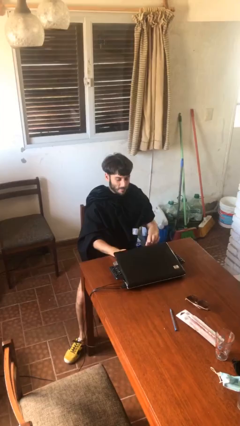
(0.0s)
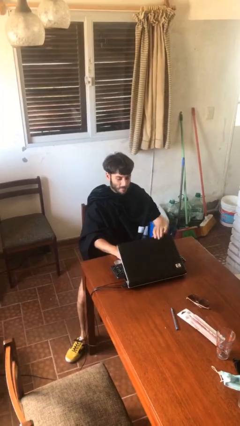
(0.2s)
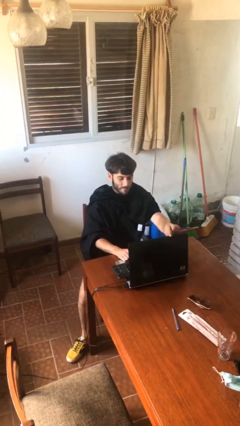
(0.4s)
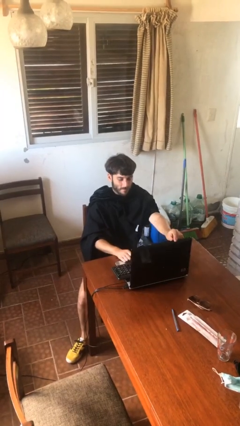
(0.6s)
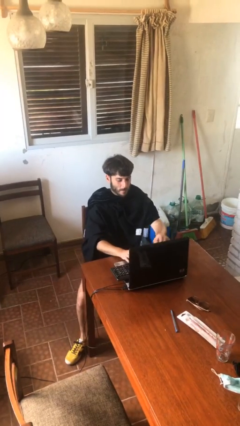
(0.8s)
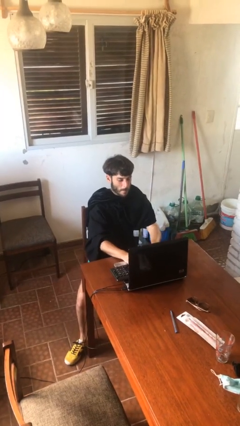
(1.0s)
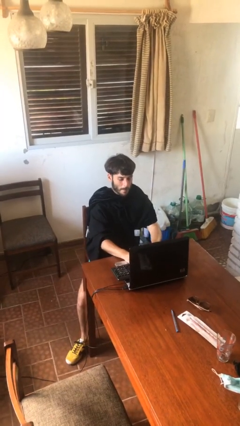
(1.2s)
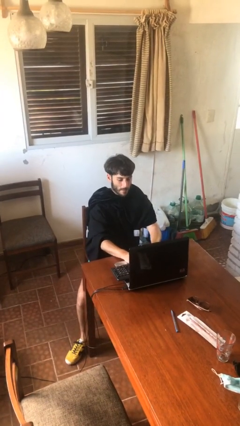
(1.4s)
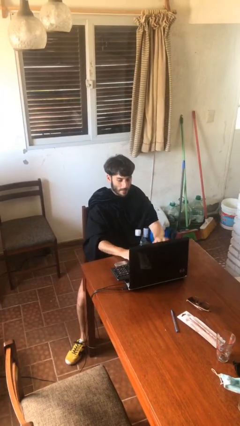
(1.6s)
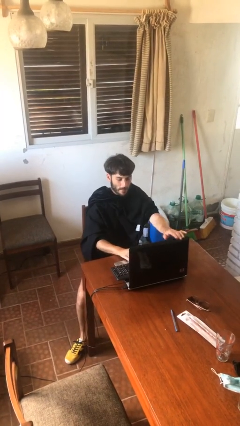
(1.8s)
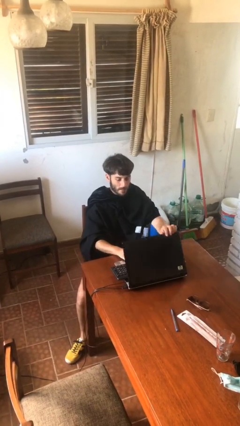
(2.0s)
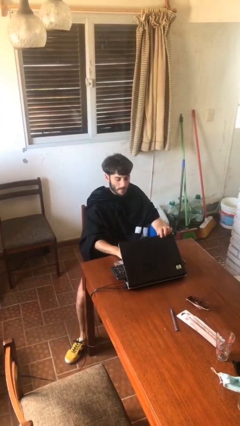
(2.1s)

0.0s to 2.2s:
person interacts with laptop

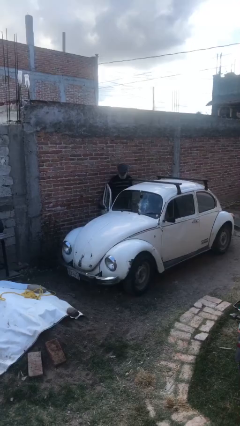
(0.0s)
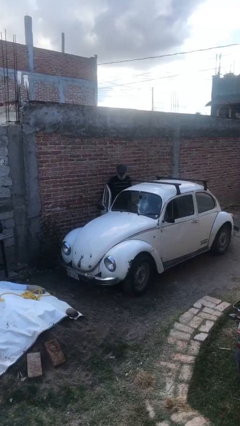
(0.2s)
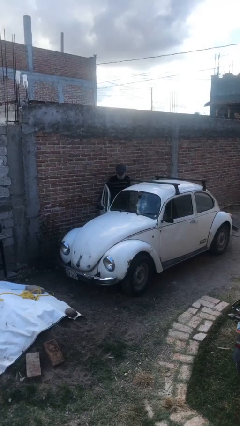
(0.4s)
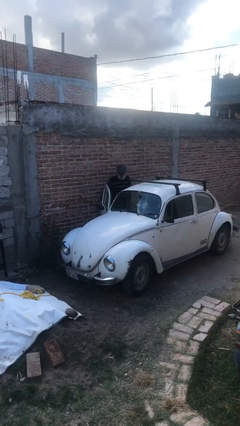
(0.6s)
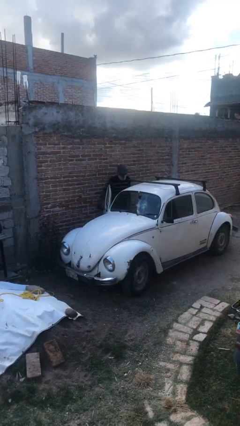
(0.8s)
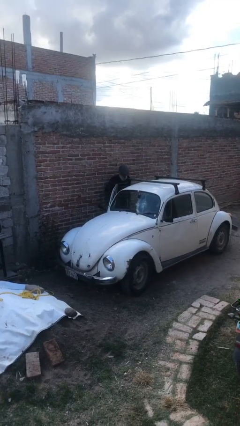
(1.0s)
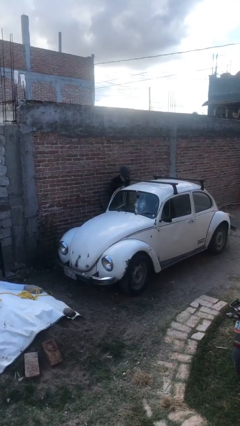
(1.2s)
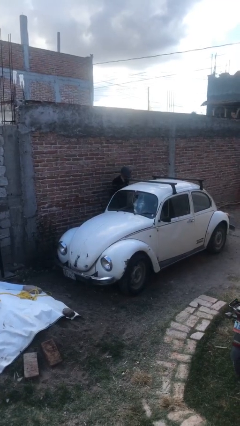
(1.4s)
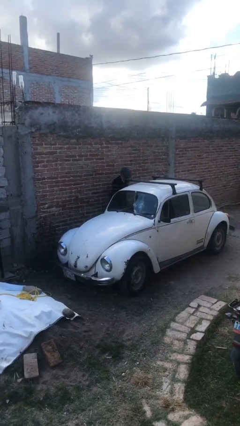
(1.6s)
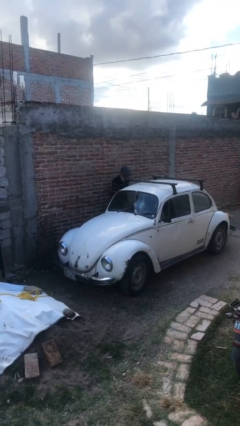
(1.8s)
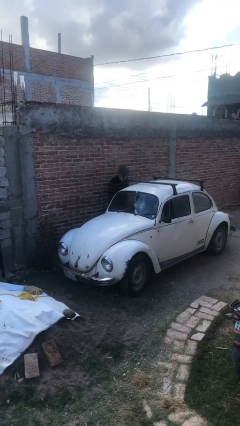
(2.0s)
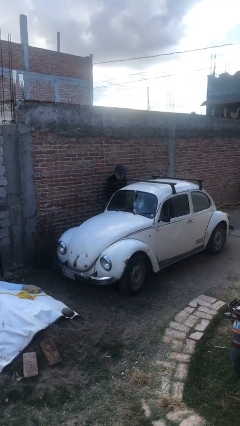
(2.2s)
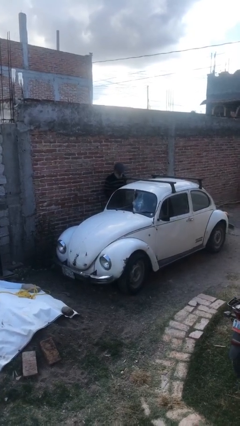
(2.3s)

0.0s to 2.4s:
person closes car door

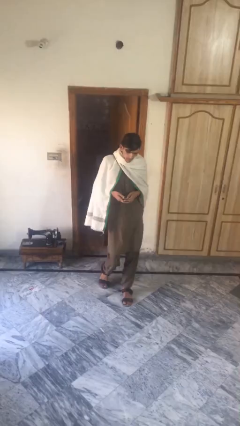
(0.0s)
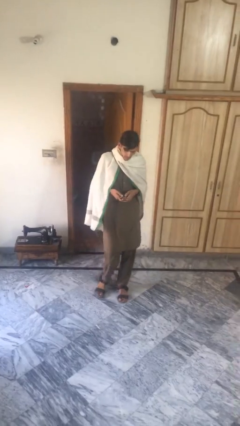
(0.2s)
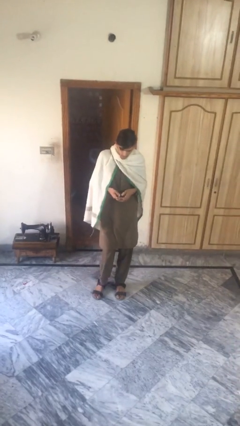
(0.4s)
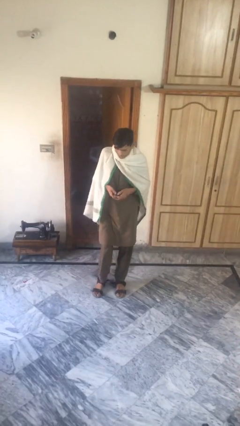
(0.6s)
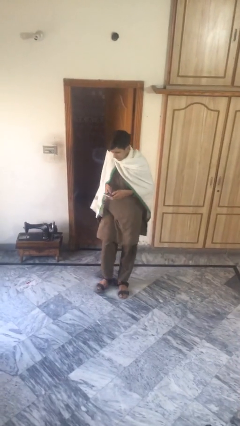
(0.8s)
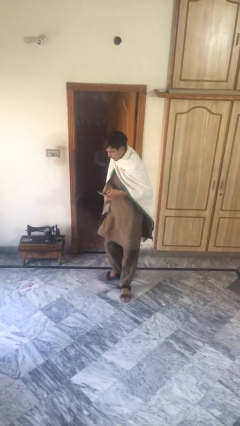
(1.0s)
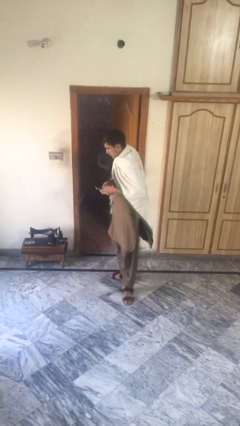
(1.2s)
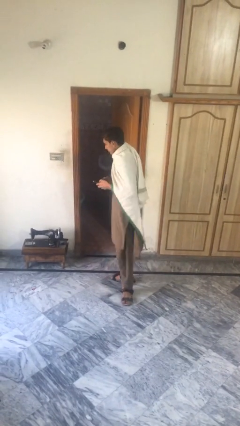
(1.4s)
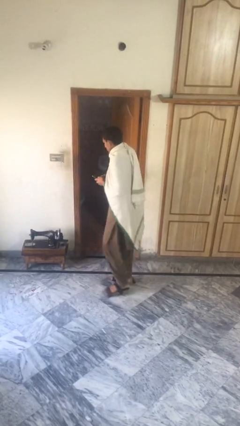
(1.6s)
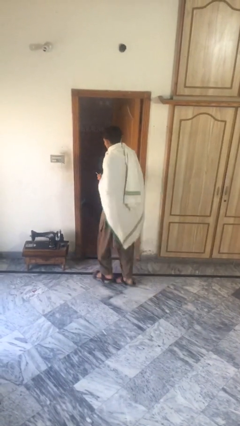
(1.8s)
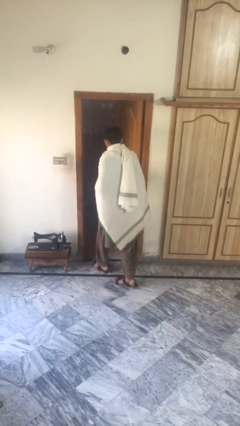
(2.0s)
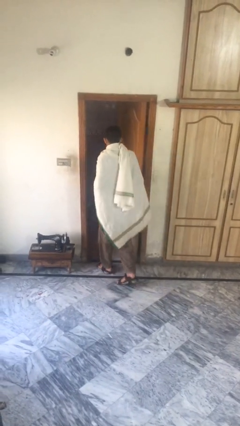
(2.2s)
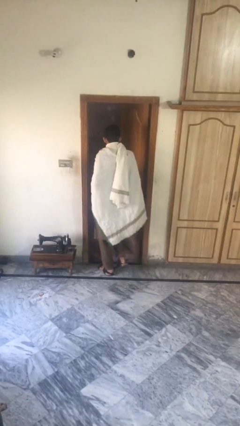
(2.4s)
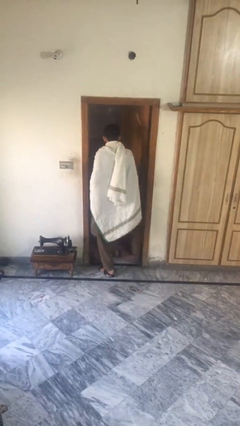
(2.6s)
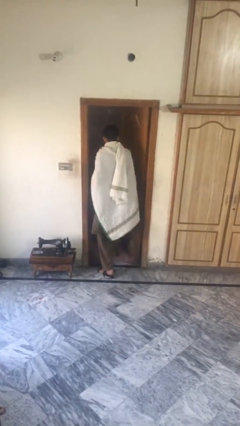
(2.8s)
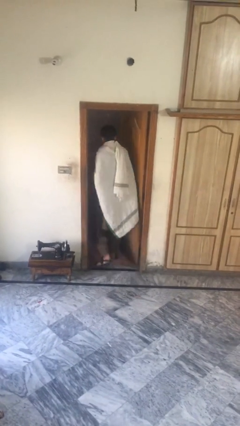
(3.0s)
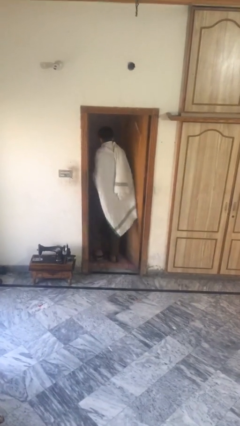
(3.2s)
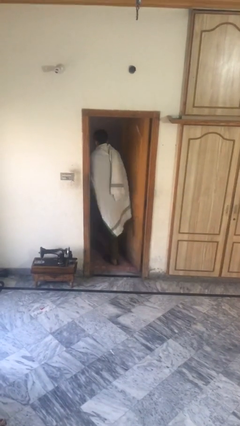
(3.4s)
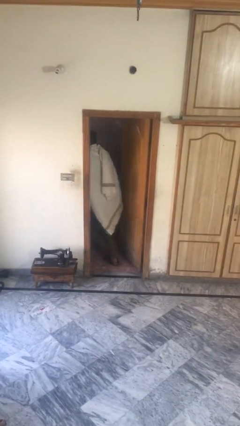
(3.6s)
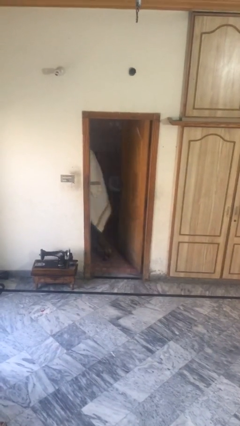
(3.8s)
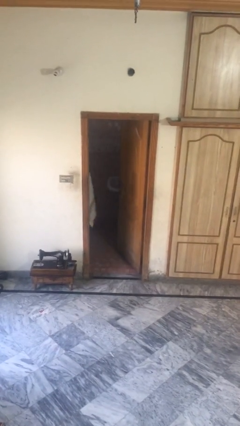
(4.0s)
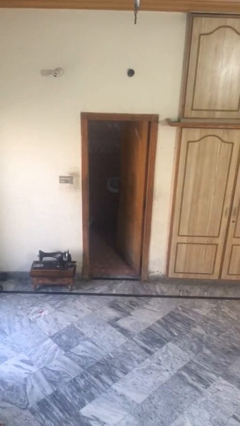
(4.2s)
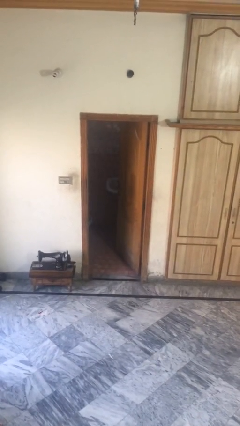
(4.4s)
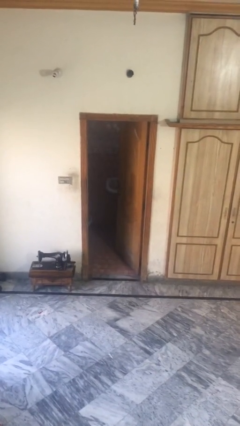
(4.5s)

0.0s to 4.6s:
person exits scene through structure

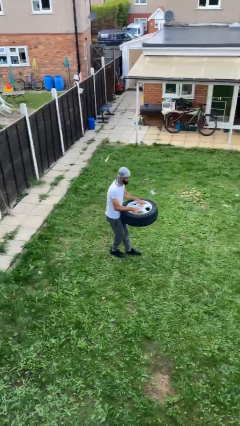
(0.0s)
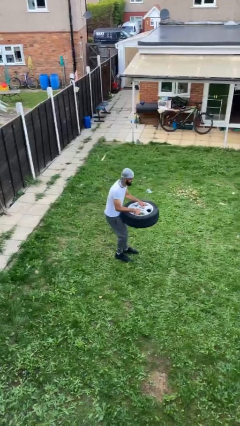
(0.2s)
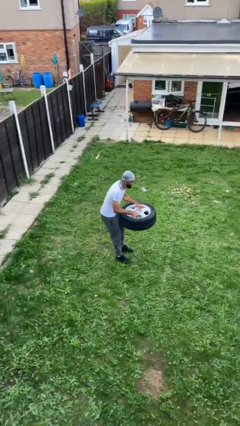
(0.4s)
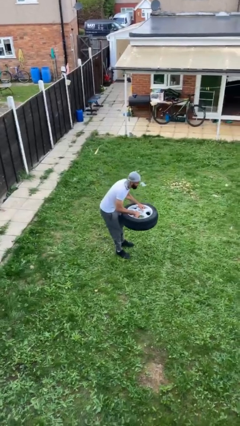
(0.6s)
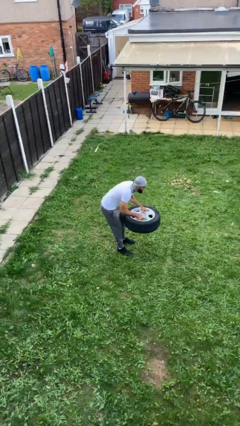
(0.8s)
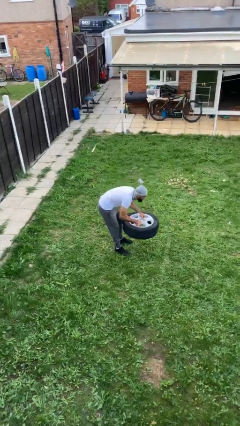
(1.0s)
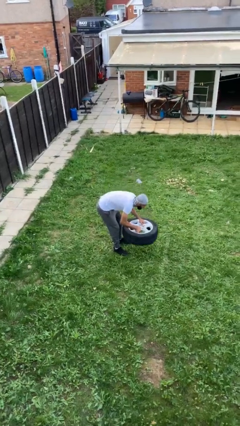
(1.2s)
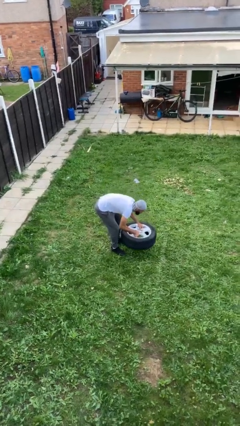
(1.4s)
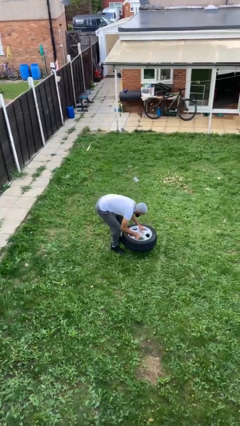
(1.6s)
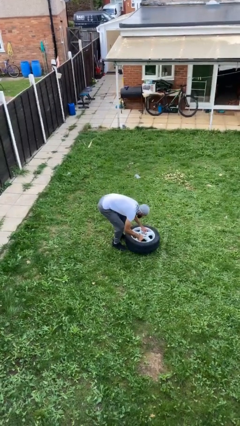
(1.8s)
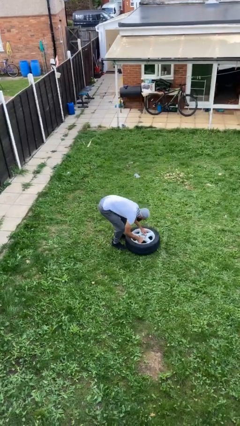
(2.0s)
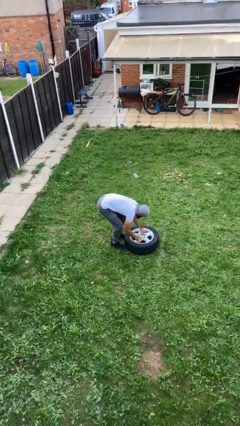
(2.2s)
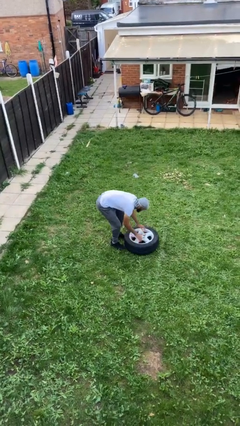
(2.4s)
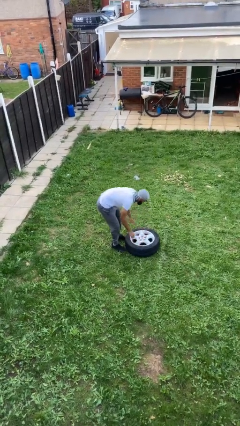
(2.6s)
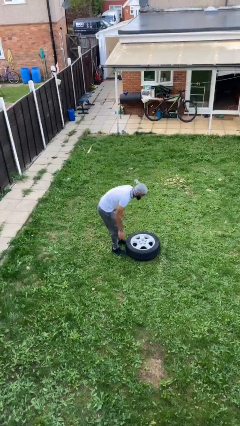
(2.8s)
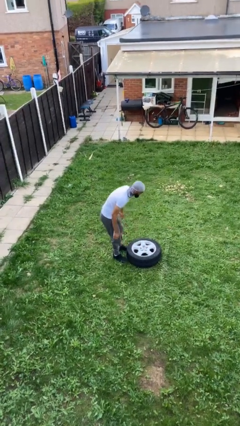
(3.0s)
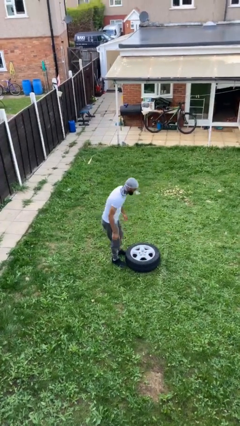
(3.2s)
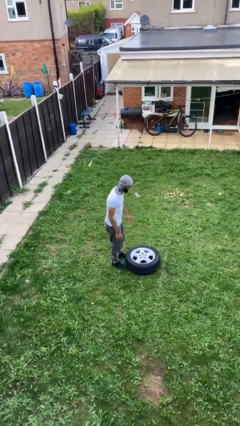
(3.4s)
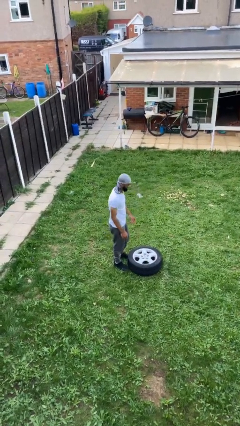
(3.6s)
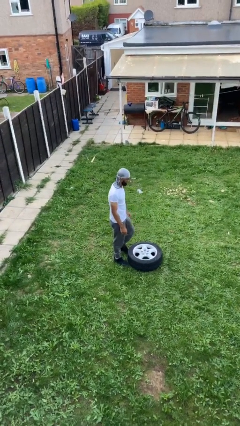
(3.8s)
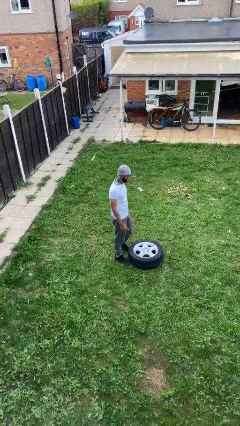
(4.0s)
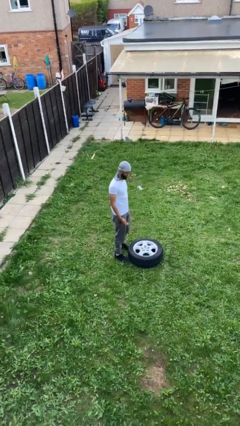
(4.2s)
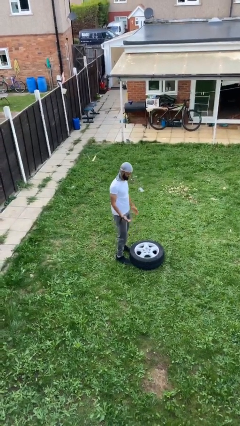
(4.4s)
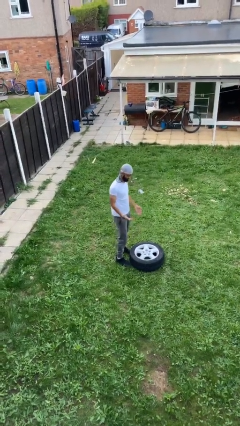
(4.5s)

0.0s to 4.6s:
person puts down object on floor

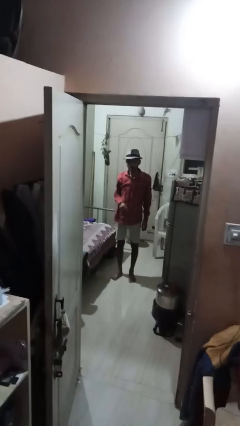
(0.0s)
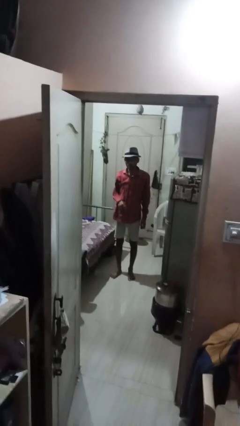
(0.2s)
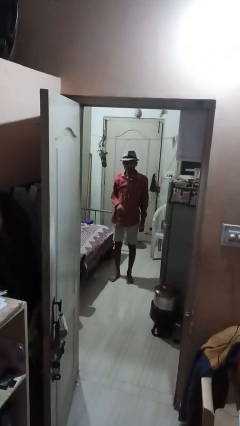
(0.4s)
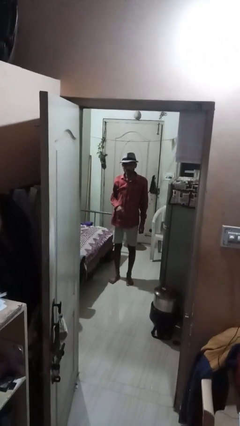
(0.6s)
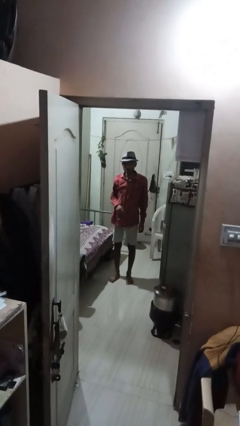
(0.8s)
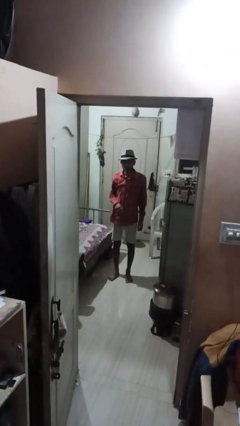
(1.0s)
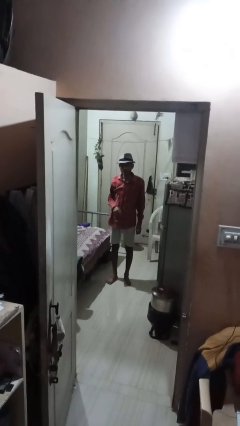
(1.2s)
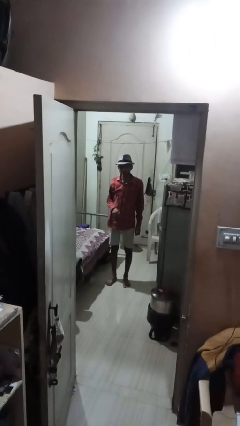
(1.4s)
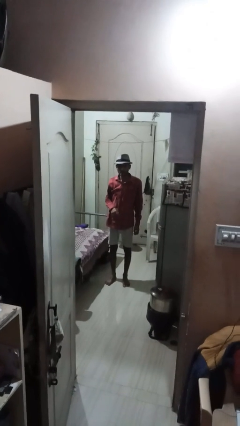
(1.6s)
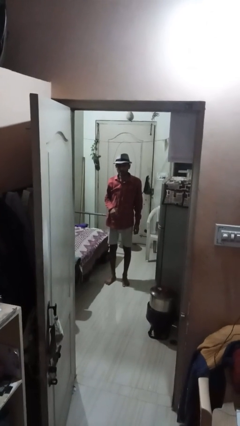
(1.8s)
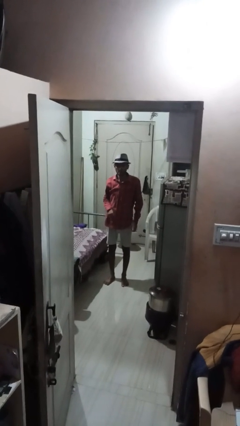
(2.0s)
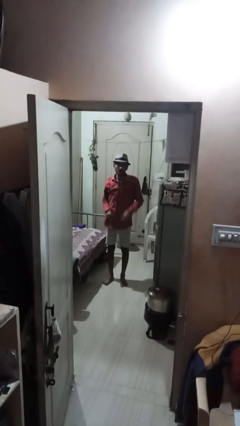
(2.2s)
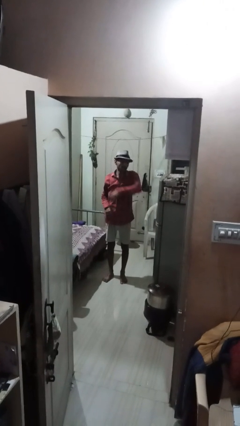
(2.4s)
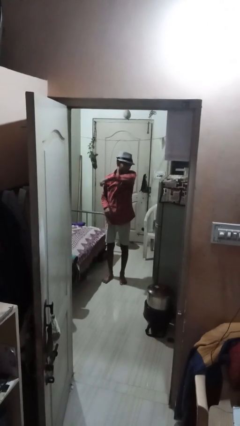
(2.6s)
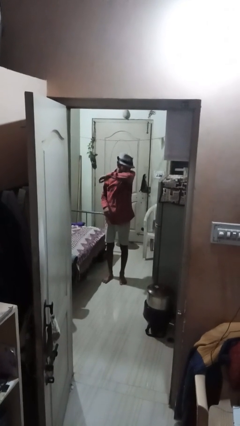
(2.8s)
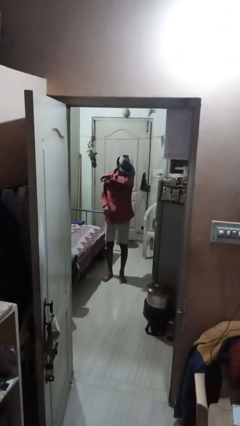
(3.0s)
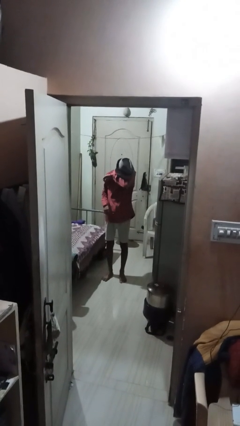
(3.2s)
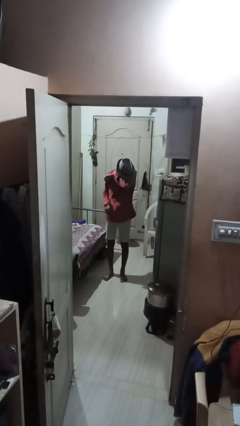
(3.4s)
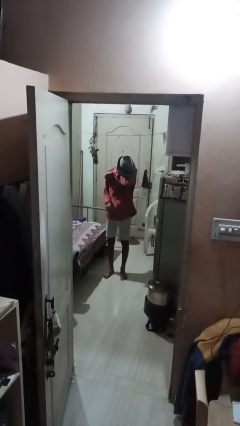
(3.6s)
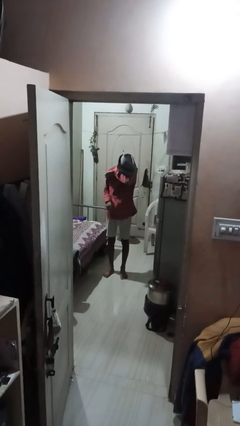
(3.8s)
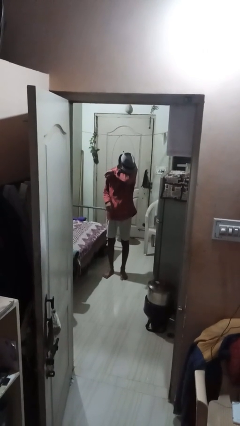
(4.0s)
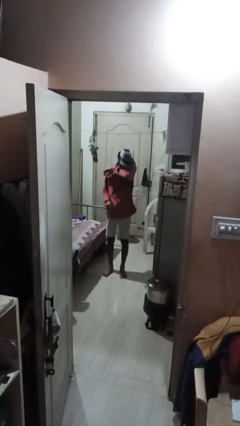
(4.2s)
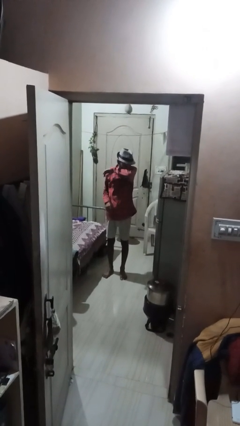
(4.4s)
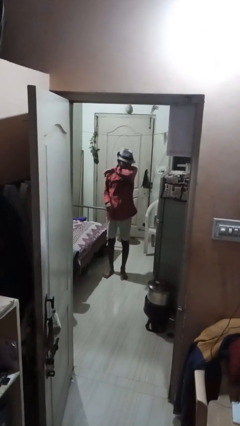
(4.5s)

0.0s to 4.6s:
person sneezes into arm
